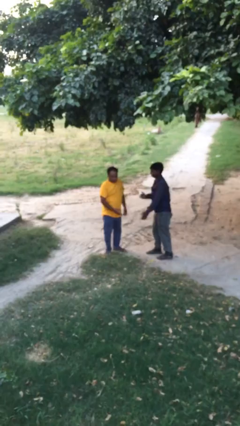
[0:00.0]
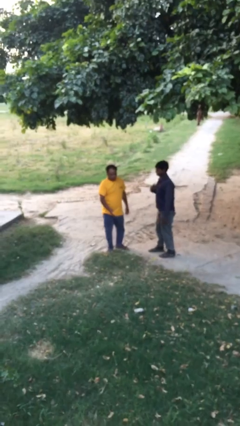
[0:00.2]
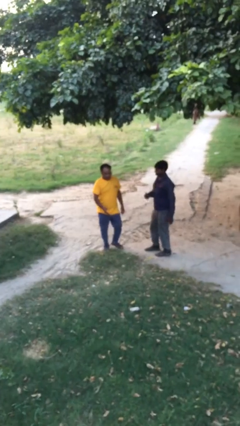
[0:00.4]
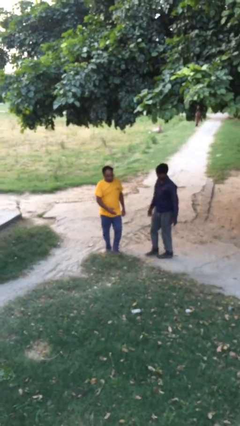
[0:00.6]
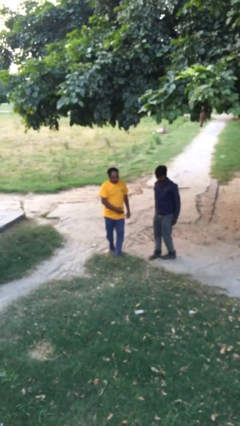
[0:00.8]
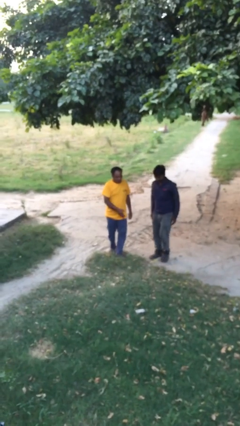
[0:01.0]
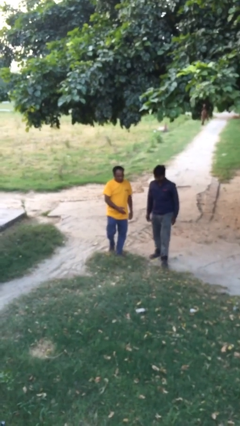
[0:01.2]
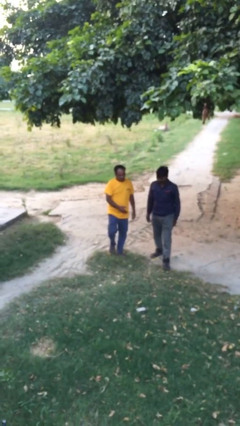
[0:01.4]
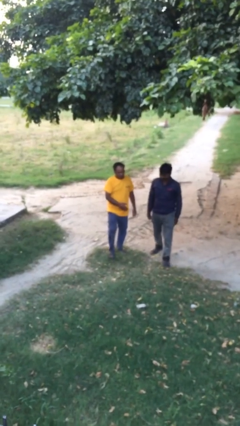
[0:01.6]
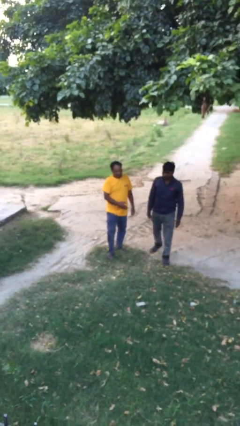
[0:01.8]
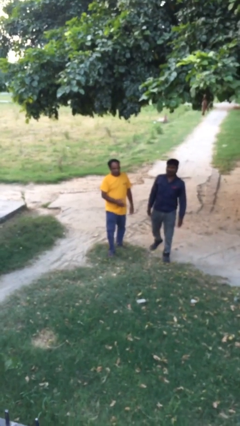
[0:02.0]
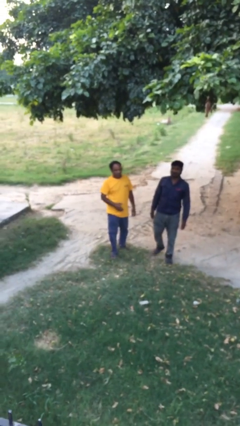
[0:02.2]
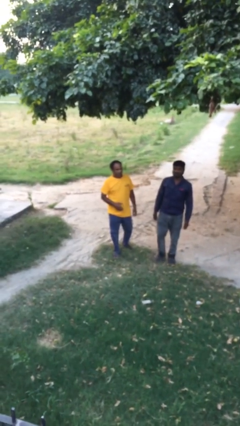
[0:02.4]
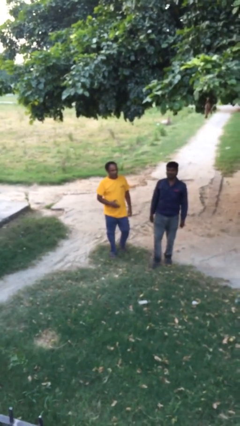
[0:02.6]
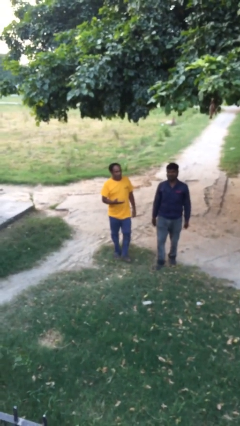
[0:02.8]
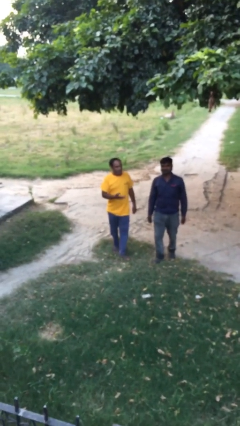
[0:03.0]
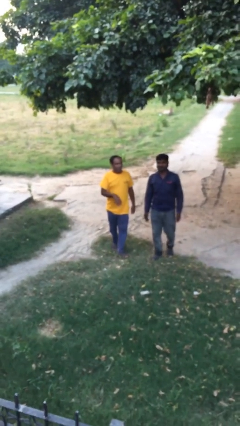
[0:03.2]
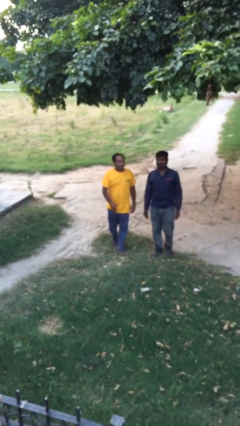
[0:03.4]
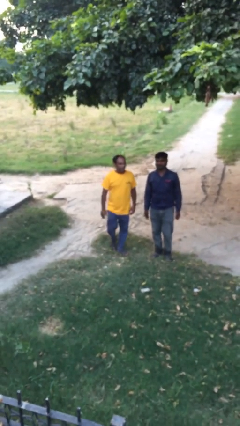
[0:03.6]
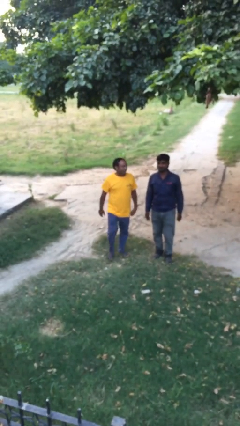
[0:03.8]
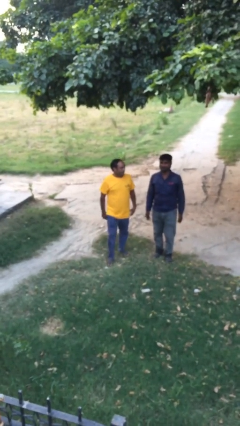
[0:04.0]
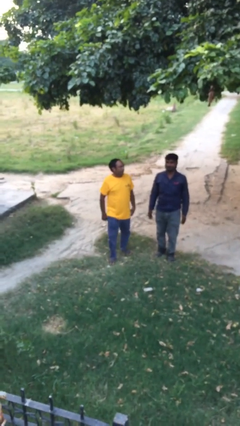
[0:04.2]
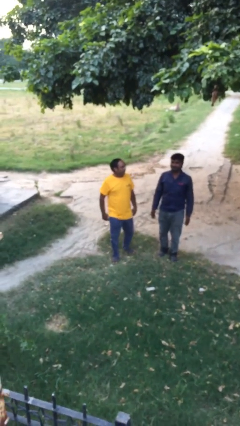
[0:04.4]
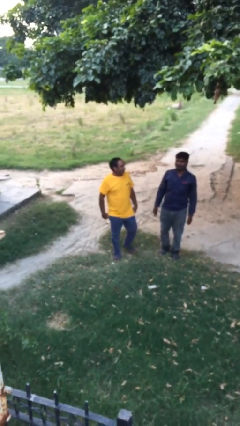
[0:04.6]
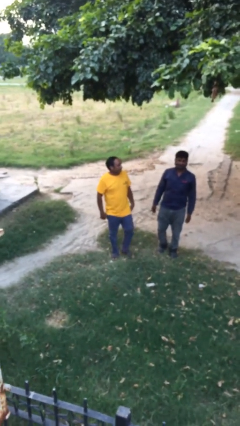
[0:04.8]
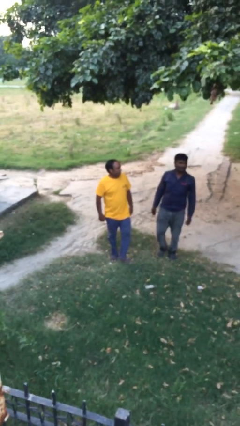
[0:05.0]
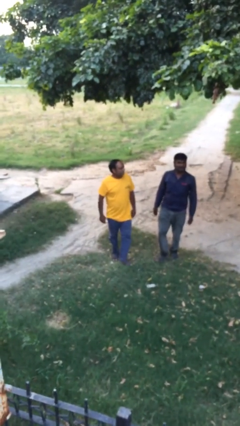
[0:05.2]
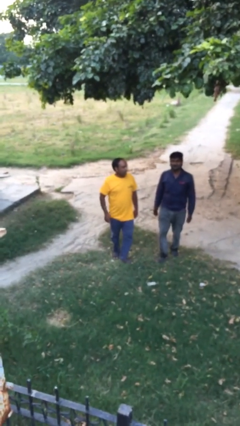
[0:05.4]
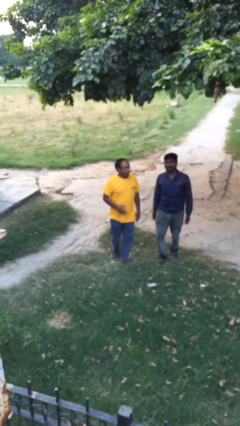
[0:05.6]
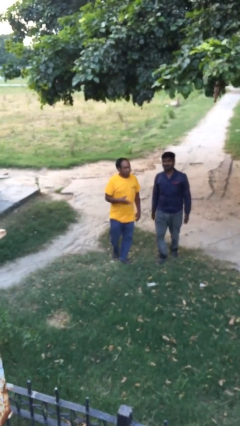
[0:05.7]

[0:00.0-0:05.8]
person talks to person

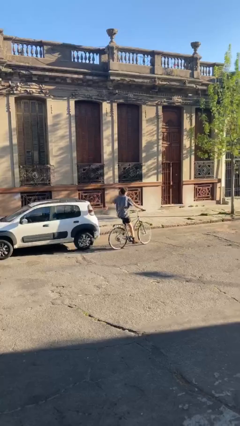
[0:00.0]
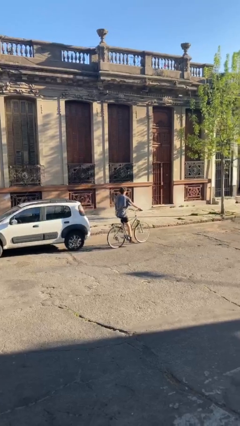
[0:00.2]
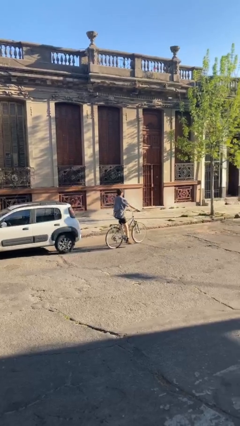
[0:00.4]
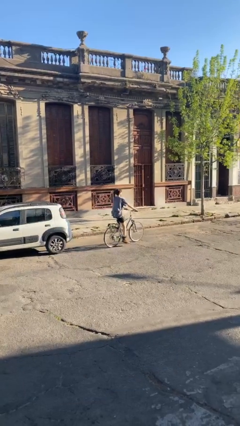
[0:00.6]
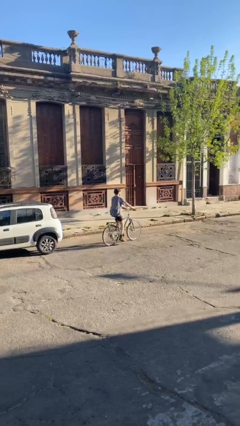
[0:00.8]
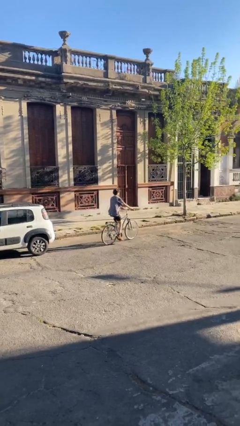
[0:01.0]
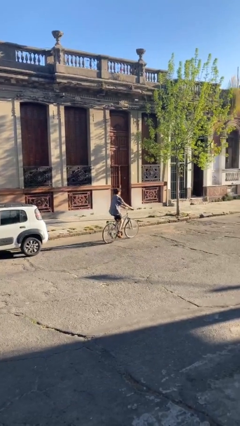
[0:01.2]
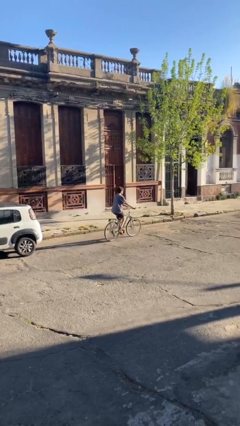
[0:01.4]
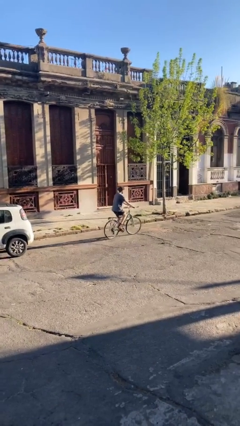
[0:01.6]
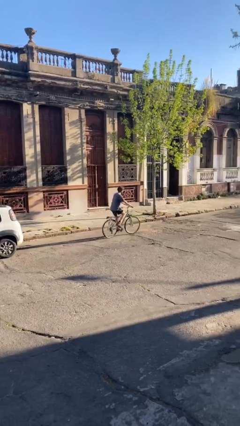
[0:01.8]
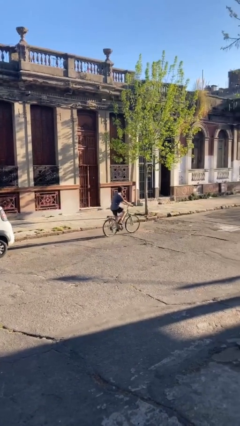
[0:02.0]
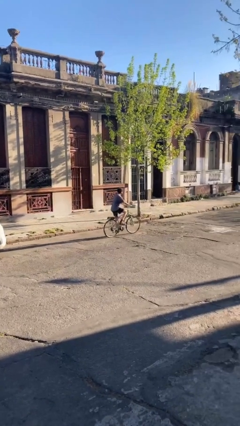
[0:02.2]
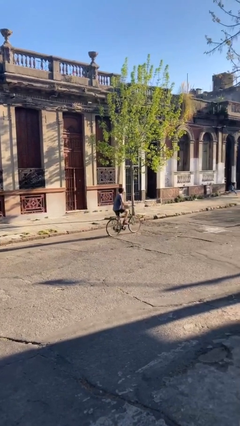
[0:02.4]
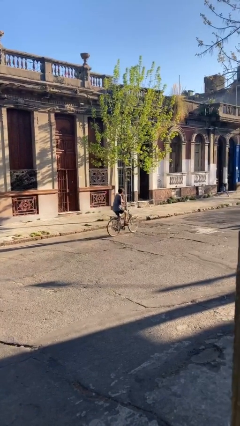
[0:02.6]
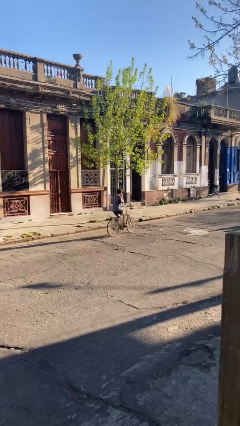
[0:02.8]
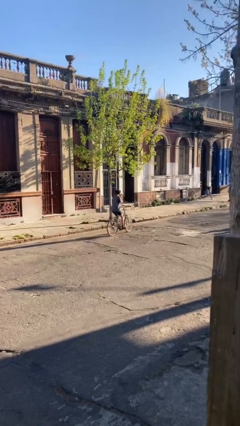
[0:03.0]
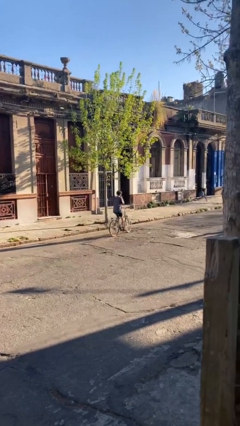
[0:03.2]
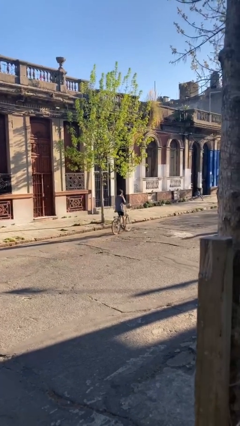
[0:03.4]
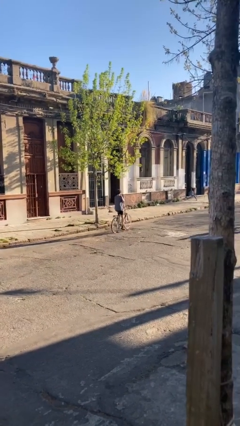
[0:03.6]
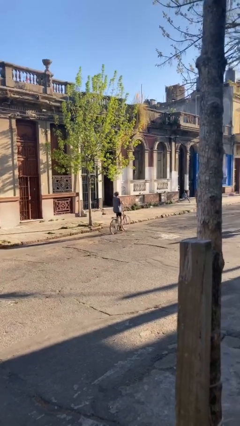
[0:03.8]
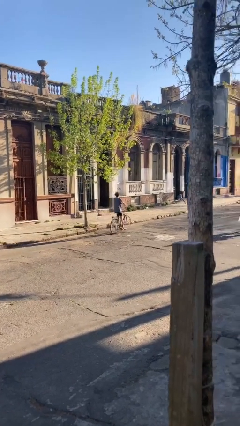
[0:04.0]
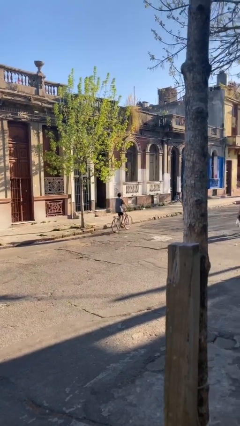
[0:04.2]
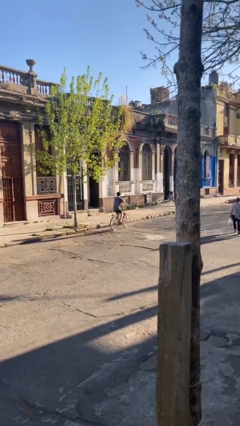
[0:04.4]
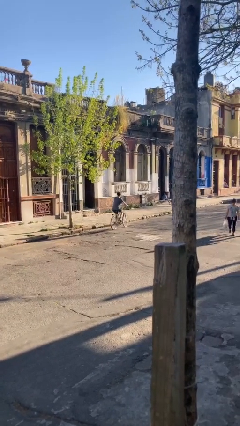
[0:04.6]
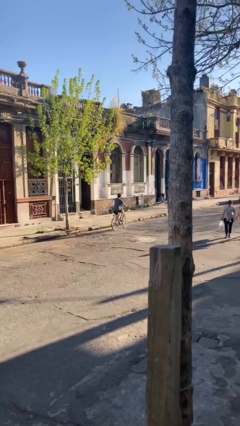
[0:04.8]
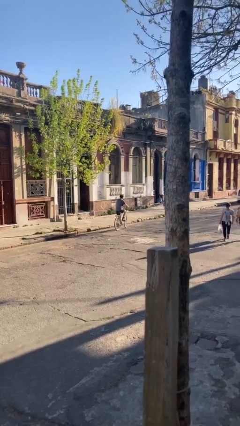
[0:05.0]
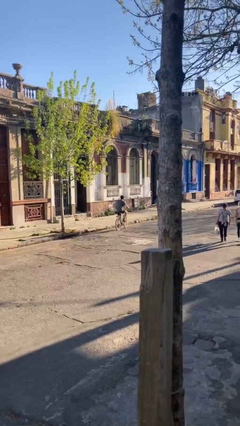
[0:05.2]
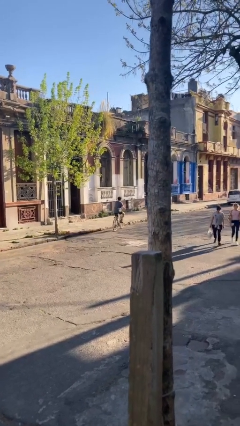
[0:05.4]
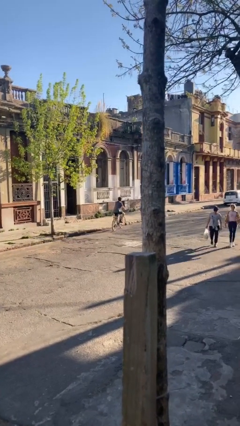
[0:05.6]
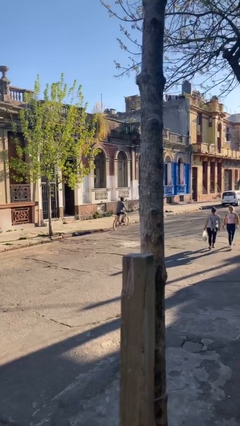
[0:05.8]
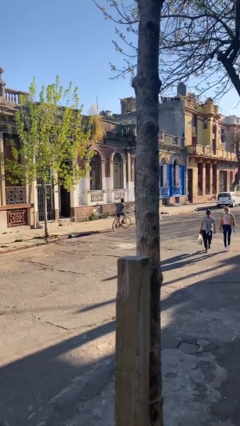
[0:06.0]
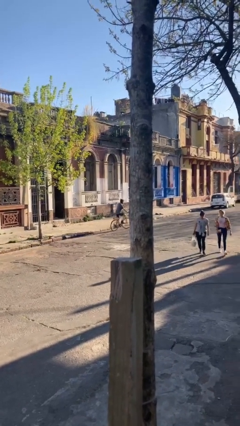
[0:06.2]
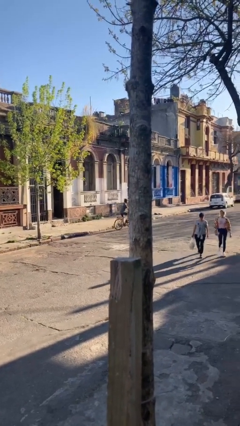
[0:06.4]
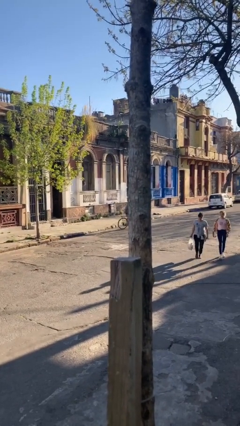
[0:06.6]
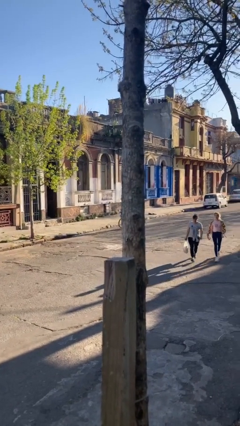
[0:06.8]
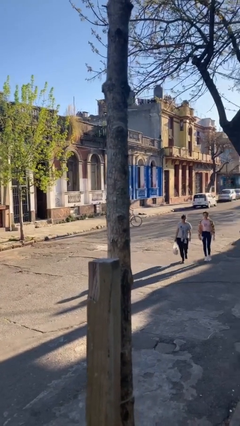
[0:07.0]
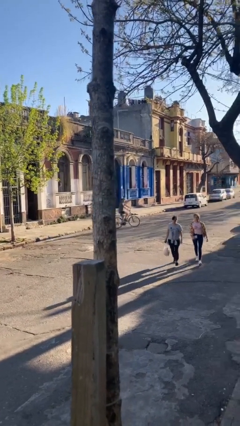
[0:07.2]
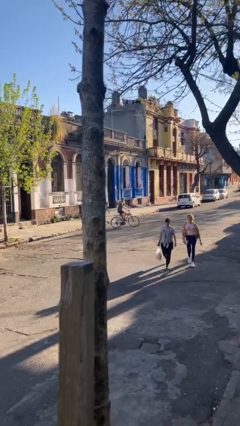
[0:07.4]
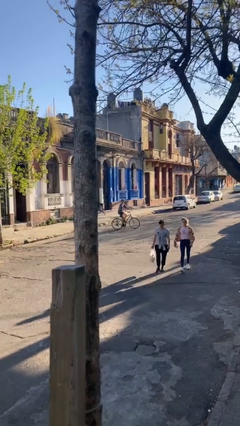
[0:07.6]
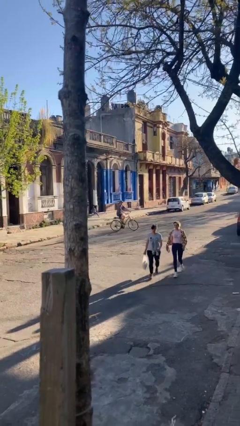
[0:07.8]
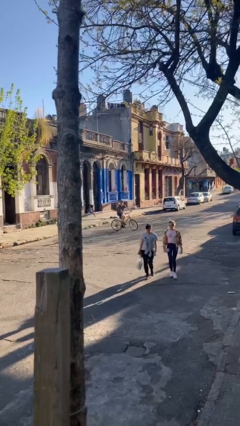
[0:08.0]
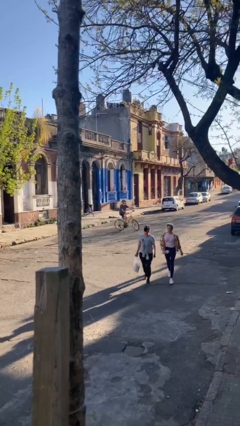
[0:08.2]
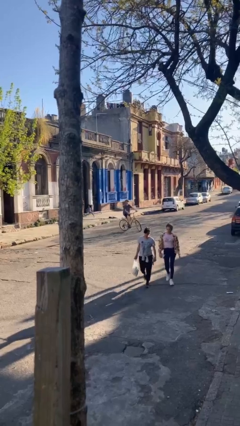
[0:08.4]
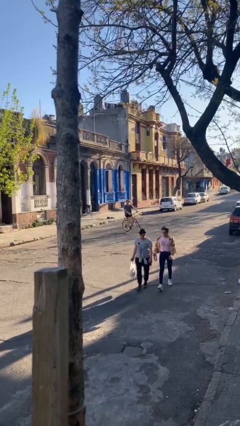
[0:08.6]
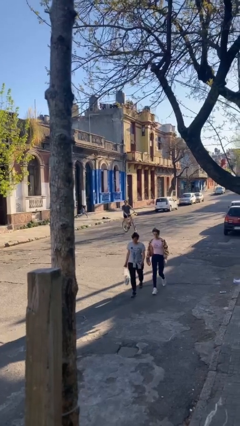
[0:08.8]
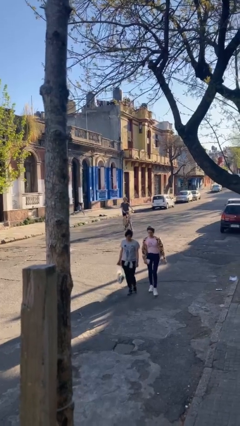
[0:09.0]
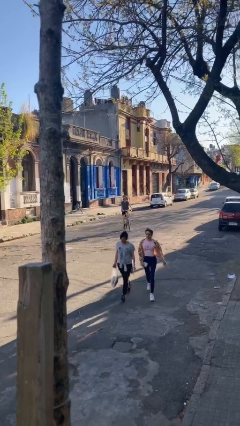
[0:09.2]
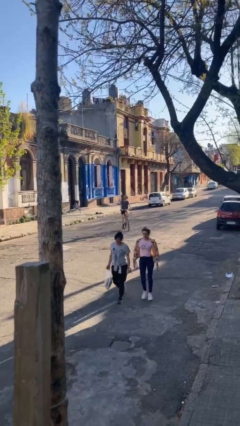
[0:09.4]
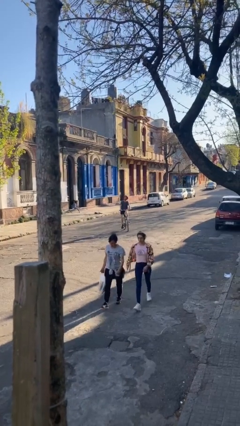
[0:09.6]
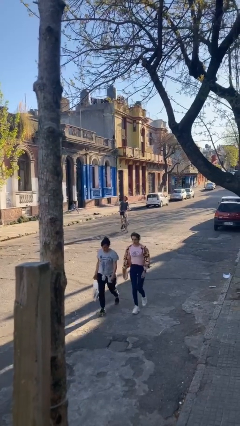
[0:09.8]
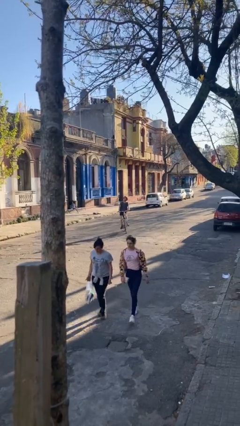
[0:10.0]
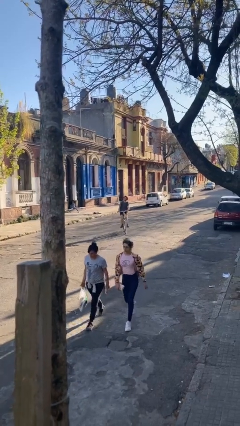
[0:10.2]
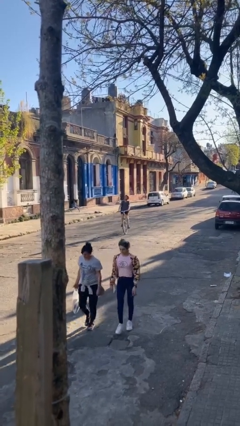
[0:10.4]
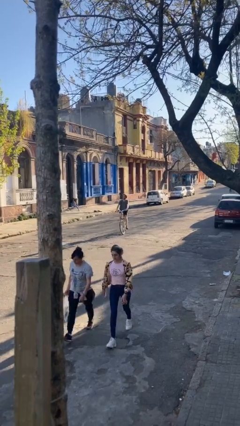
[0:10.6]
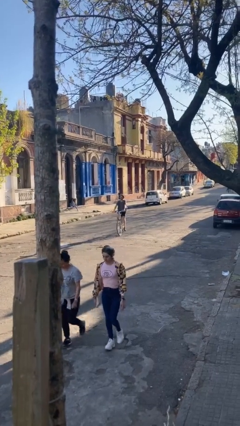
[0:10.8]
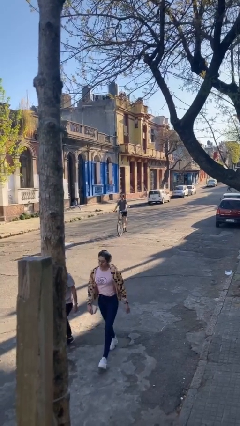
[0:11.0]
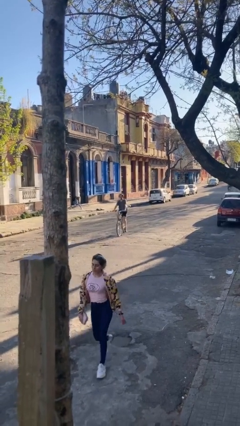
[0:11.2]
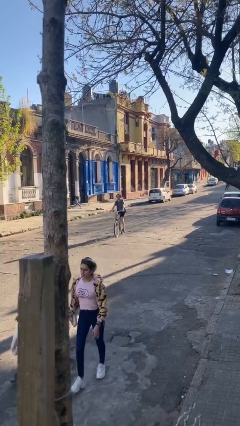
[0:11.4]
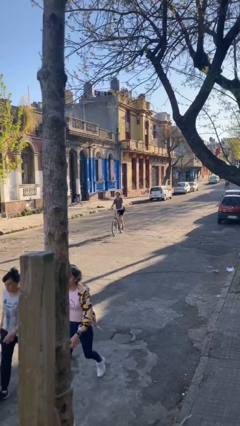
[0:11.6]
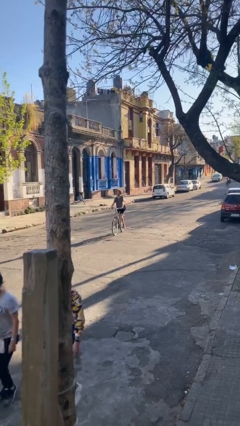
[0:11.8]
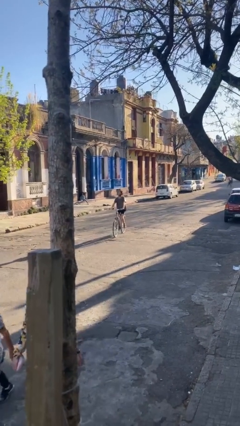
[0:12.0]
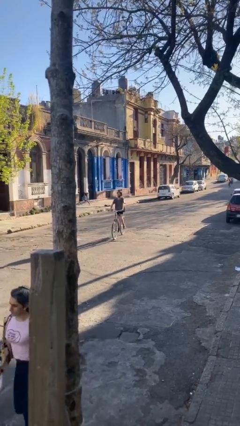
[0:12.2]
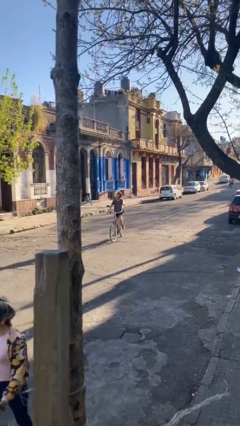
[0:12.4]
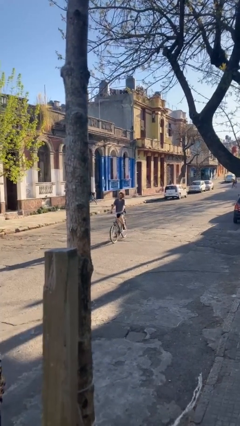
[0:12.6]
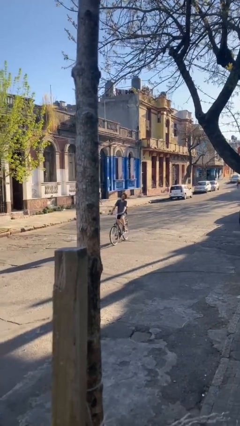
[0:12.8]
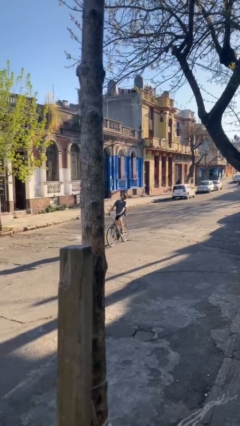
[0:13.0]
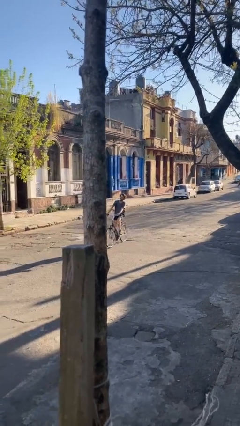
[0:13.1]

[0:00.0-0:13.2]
person rides bicycle
